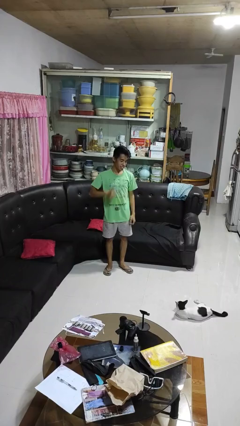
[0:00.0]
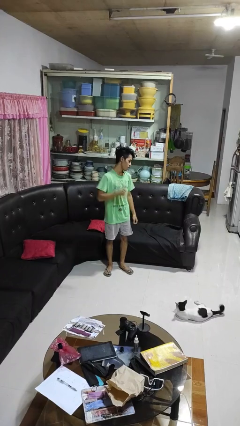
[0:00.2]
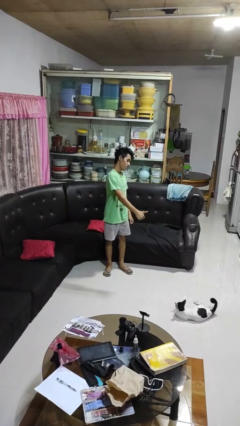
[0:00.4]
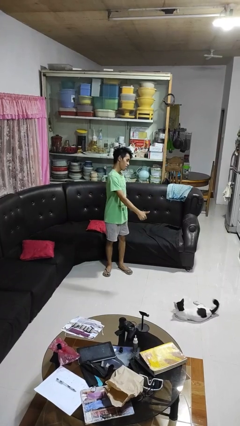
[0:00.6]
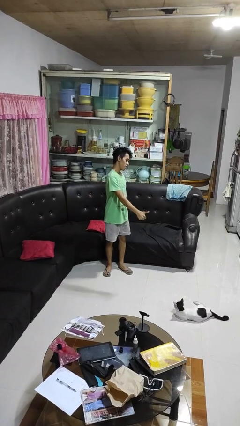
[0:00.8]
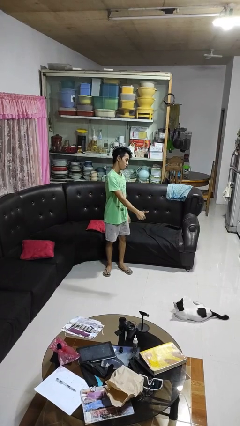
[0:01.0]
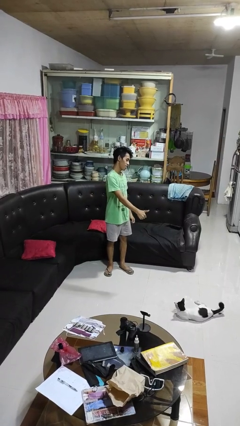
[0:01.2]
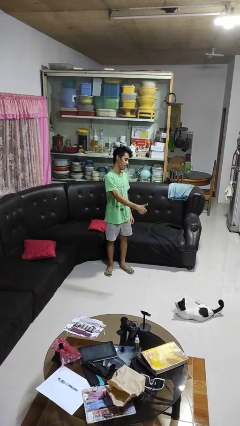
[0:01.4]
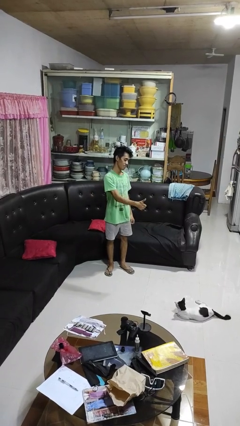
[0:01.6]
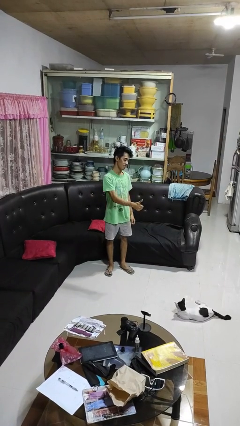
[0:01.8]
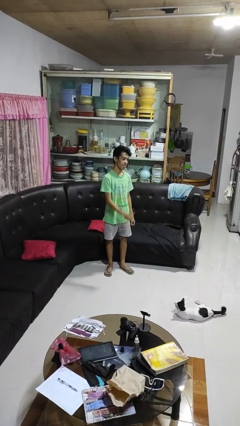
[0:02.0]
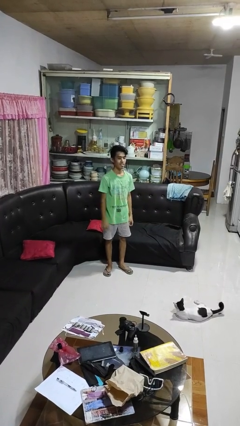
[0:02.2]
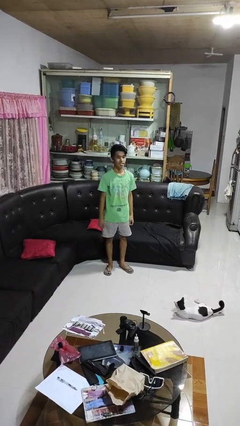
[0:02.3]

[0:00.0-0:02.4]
person gestures thumbs up

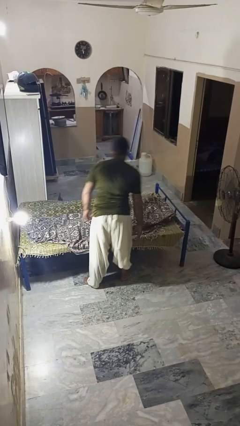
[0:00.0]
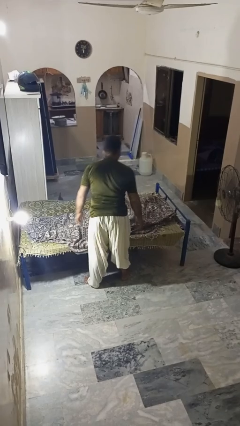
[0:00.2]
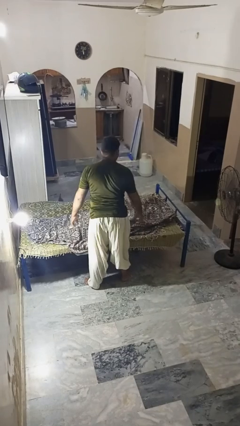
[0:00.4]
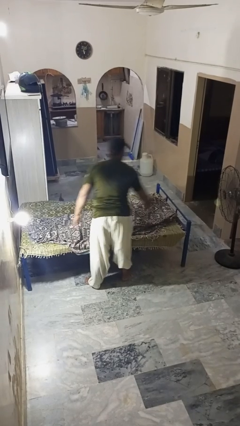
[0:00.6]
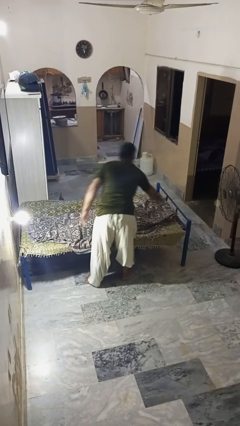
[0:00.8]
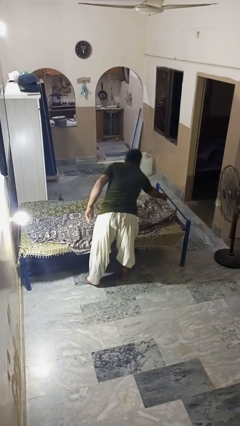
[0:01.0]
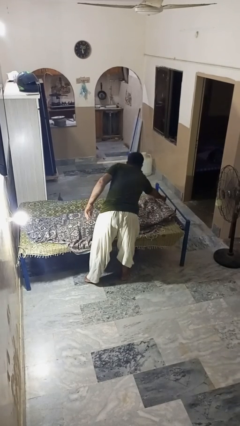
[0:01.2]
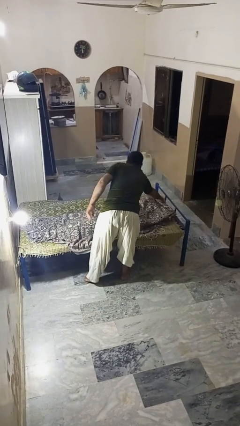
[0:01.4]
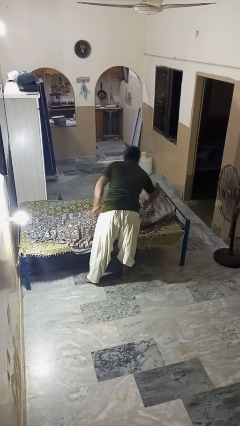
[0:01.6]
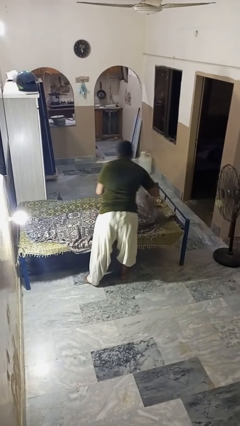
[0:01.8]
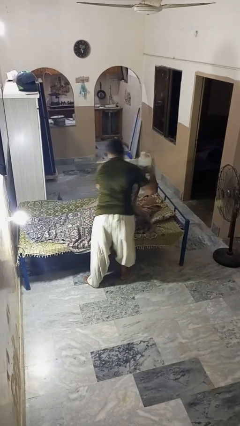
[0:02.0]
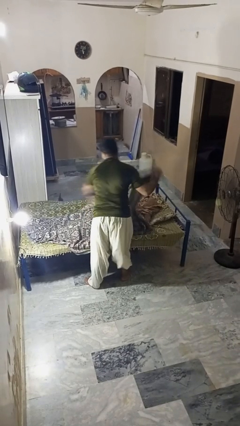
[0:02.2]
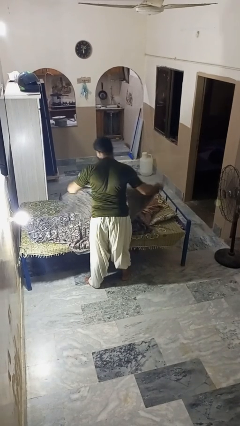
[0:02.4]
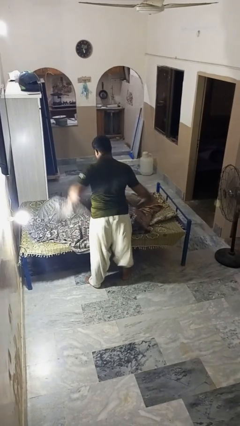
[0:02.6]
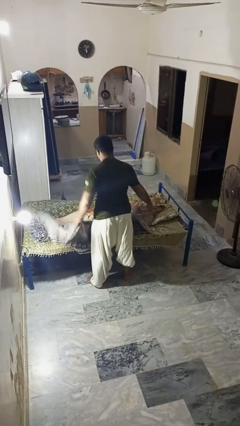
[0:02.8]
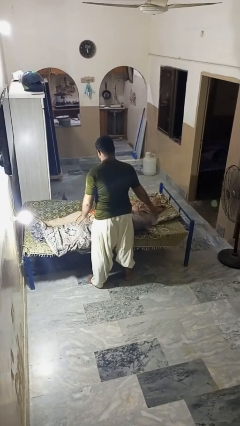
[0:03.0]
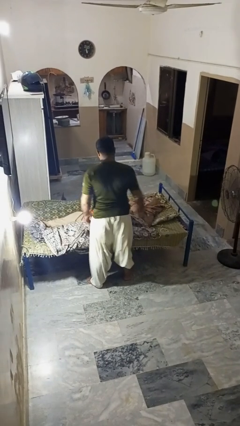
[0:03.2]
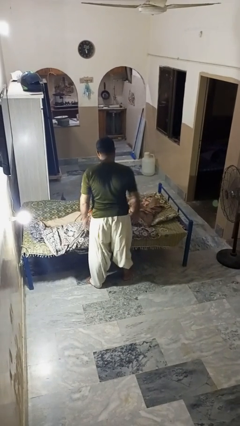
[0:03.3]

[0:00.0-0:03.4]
person uncovers friend with blanket

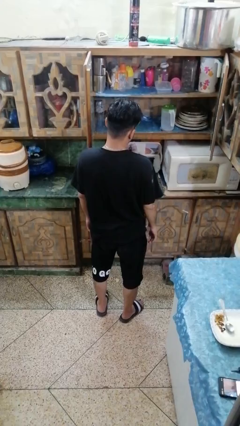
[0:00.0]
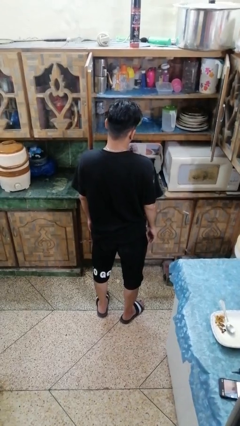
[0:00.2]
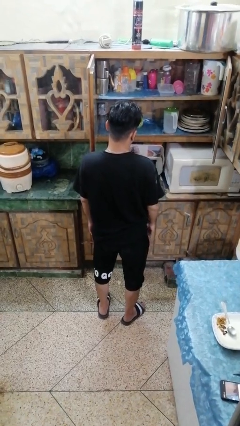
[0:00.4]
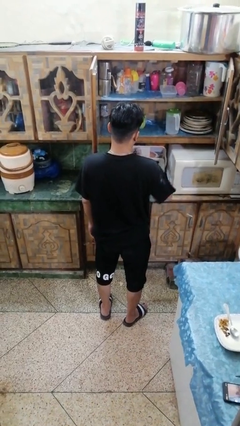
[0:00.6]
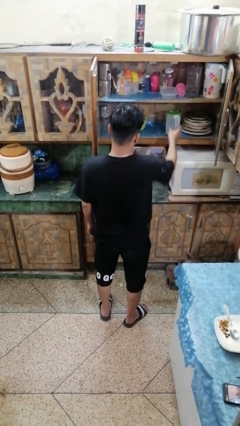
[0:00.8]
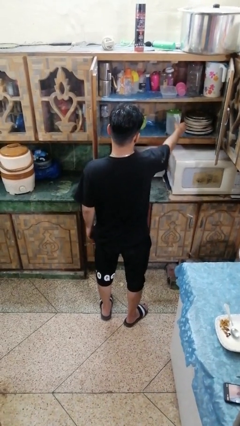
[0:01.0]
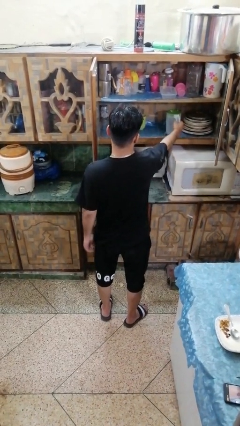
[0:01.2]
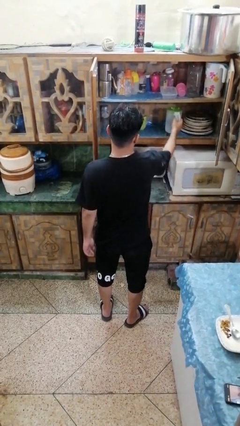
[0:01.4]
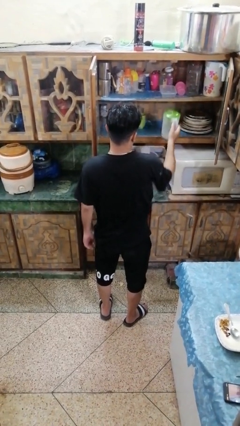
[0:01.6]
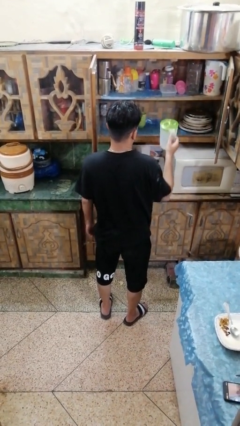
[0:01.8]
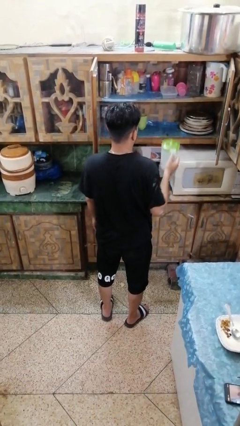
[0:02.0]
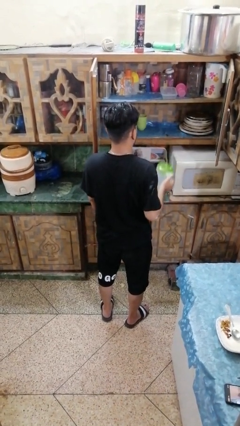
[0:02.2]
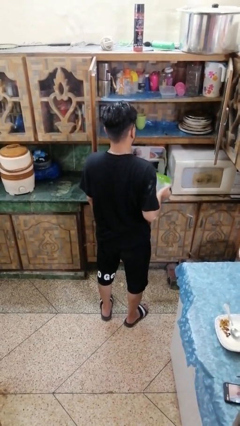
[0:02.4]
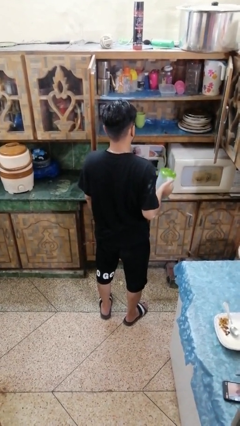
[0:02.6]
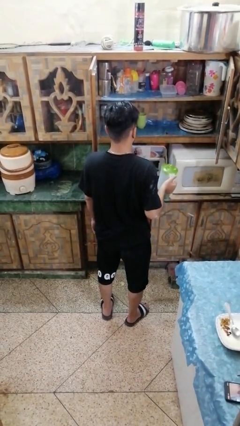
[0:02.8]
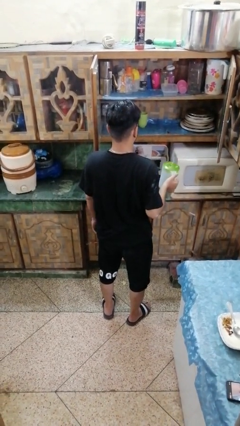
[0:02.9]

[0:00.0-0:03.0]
person picks up object from cabinet

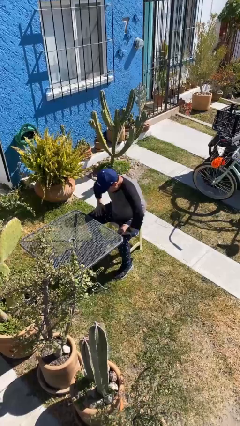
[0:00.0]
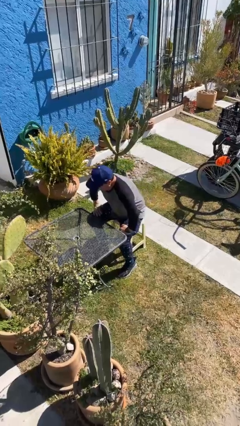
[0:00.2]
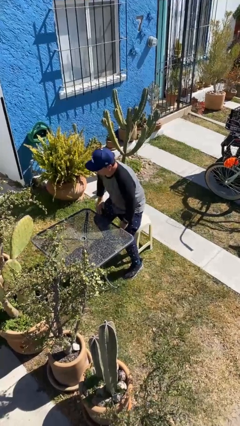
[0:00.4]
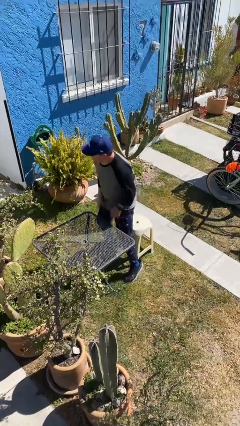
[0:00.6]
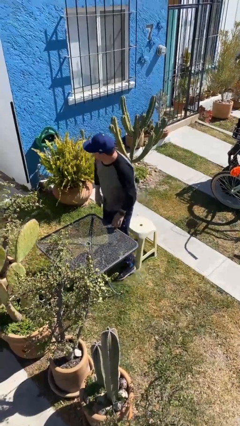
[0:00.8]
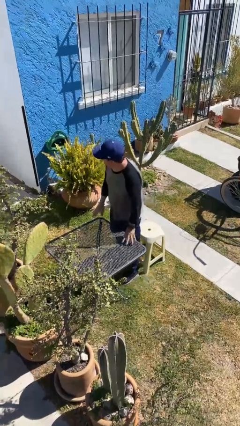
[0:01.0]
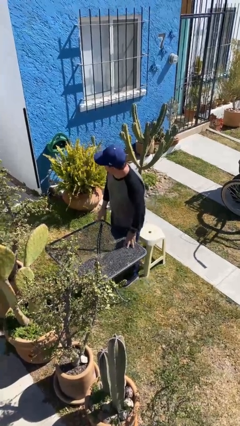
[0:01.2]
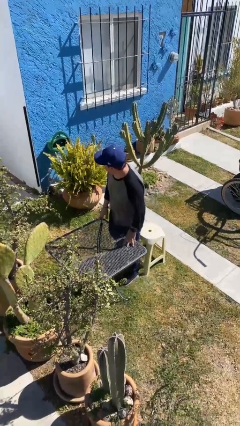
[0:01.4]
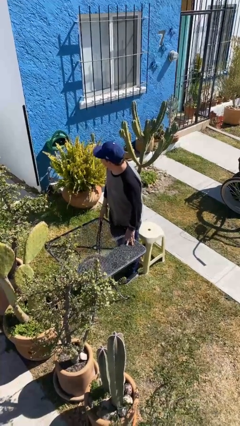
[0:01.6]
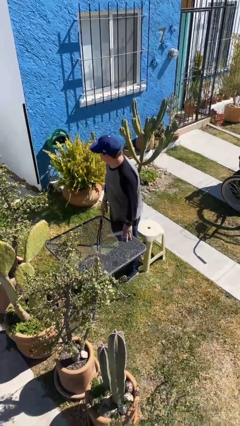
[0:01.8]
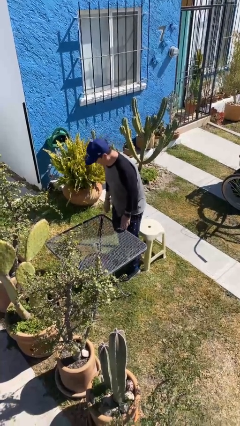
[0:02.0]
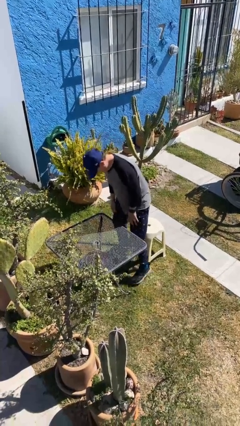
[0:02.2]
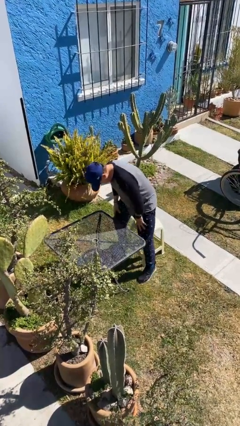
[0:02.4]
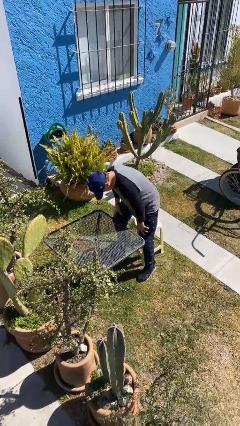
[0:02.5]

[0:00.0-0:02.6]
person stands up

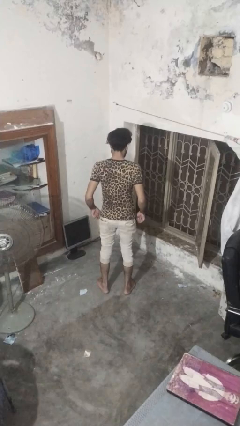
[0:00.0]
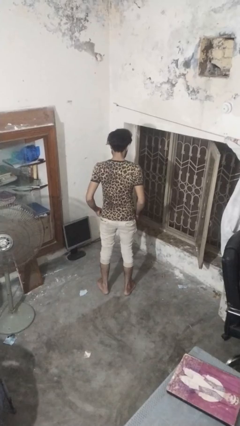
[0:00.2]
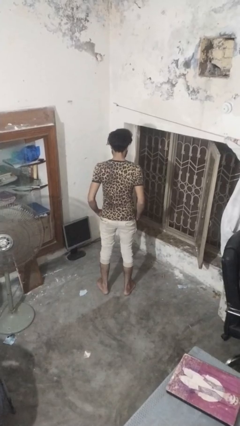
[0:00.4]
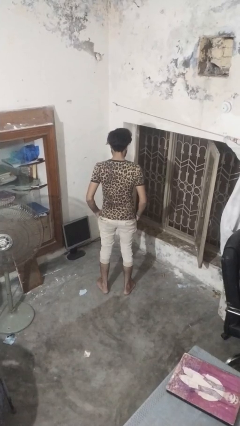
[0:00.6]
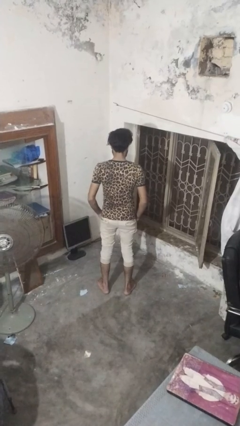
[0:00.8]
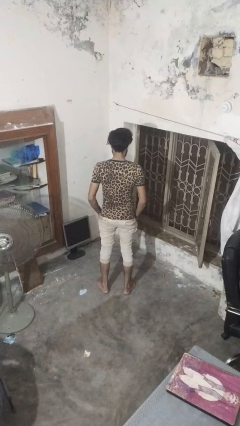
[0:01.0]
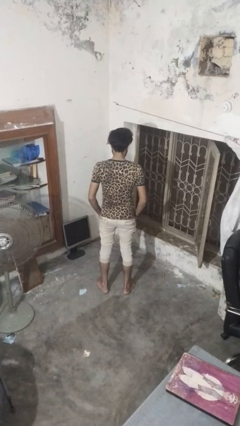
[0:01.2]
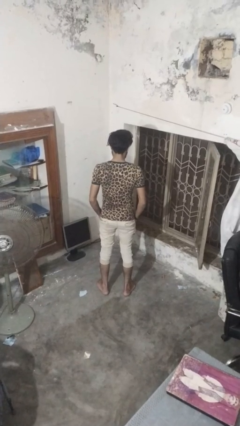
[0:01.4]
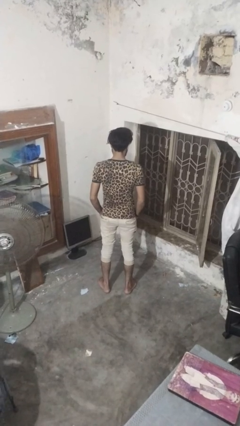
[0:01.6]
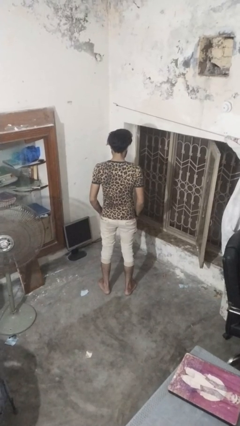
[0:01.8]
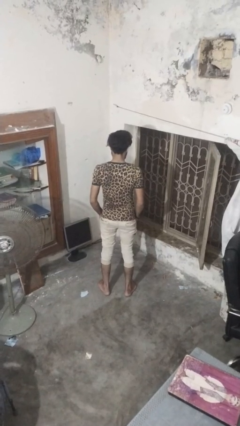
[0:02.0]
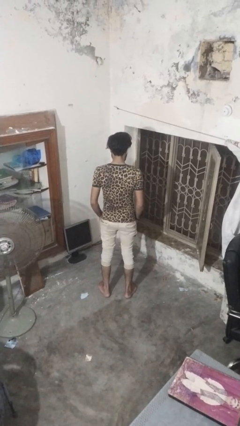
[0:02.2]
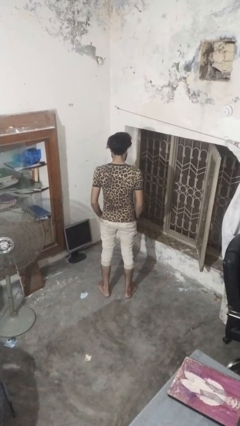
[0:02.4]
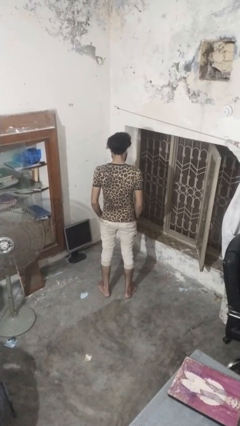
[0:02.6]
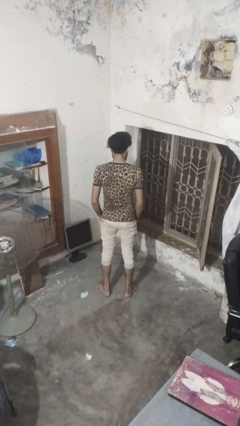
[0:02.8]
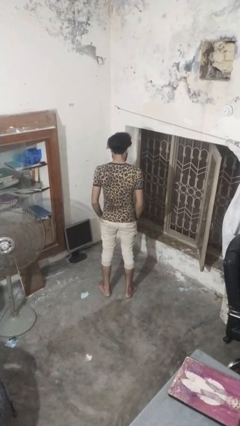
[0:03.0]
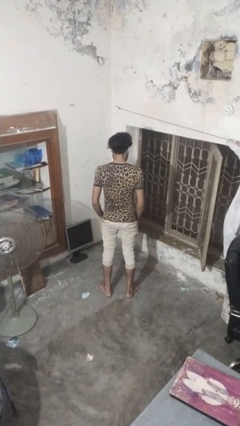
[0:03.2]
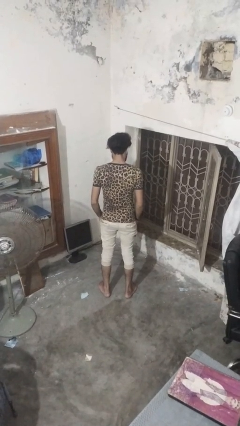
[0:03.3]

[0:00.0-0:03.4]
person puts hands in back pockets

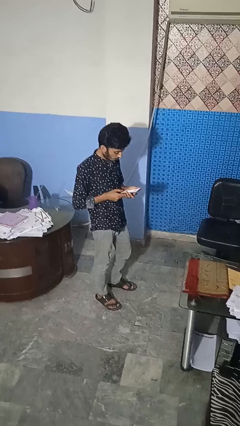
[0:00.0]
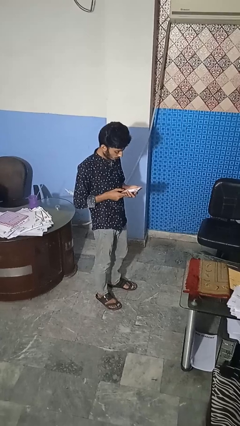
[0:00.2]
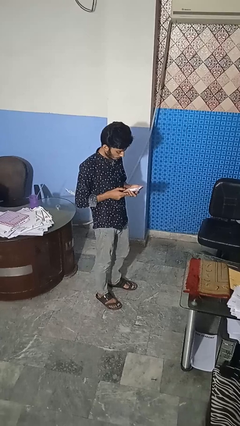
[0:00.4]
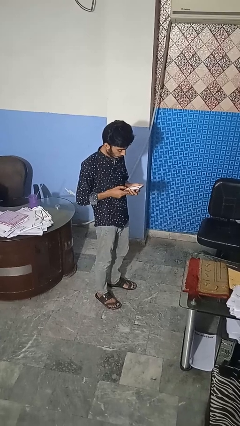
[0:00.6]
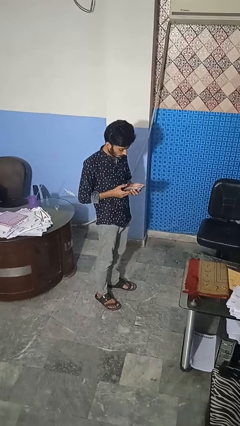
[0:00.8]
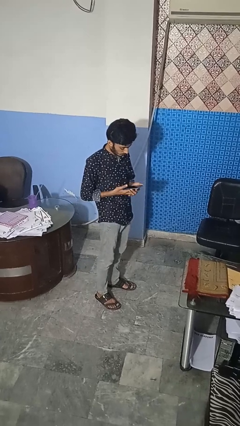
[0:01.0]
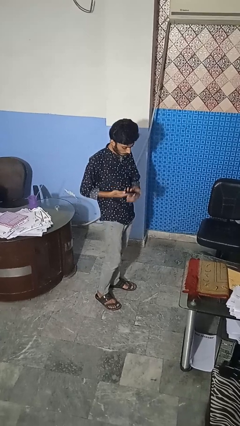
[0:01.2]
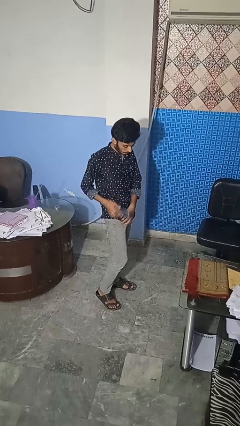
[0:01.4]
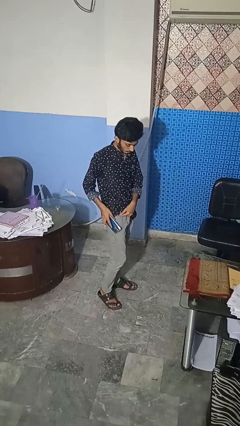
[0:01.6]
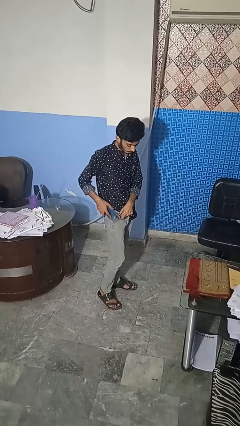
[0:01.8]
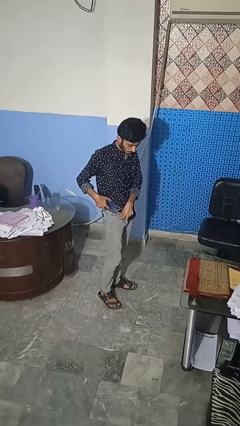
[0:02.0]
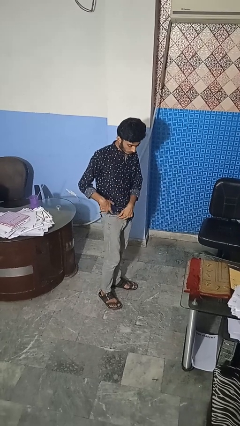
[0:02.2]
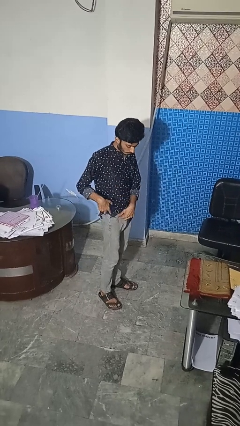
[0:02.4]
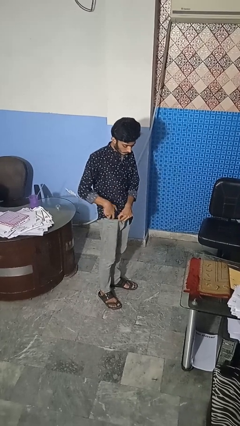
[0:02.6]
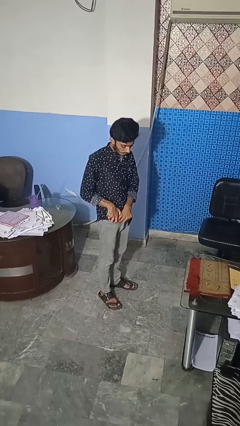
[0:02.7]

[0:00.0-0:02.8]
person puts phone into pocket

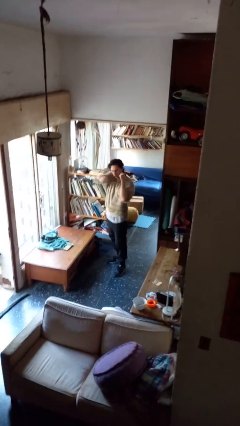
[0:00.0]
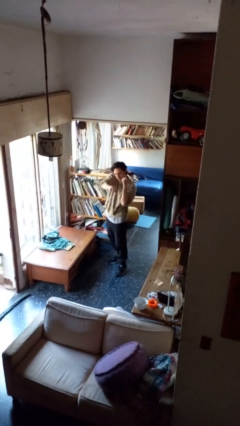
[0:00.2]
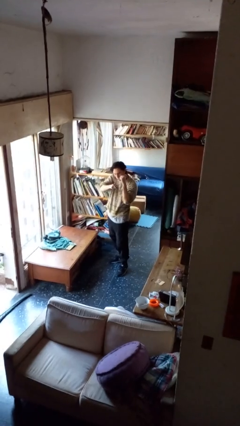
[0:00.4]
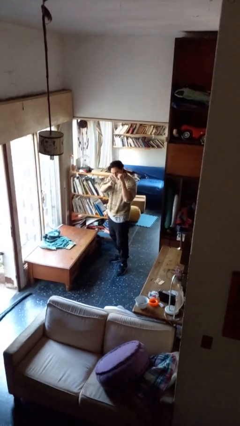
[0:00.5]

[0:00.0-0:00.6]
person punches
